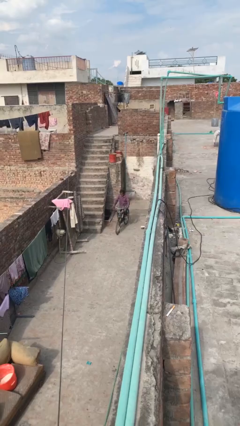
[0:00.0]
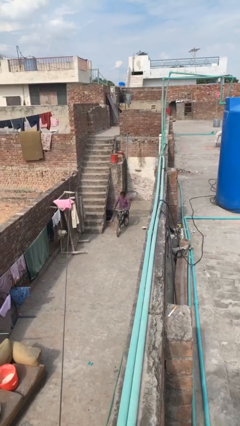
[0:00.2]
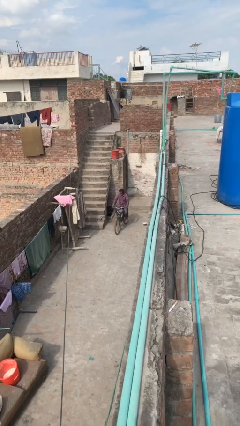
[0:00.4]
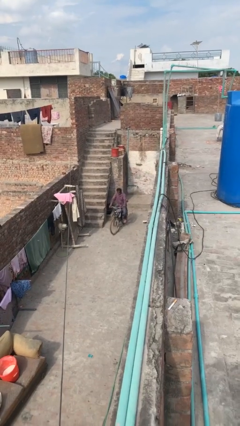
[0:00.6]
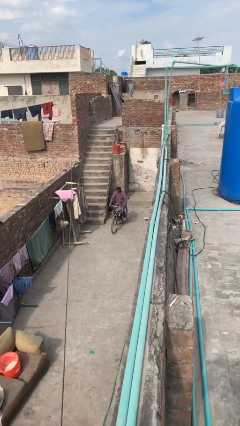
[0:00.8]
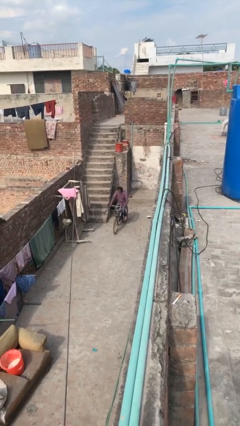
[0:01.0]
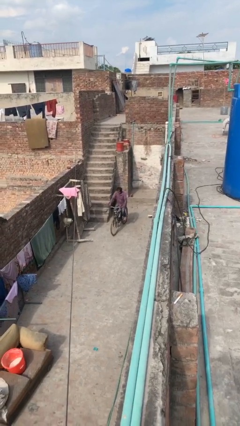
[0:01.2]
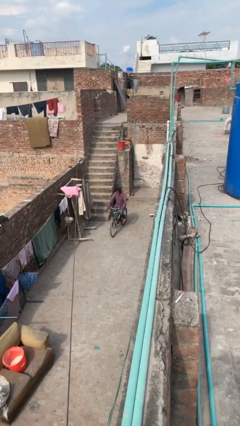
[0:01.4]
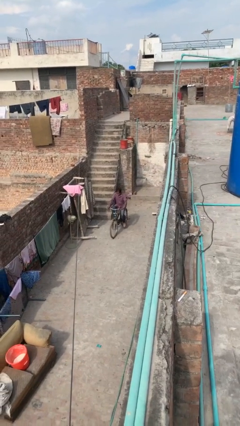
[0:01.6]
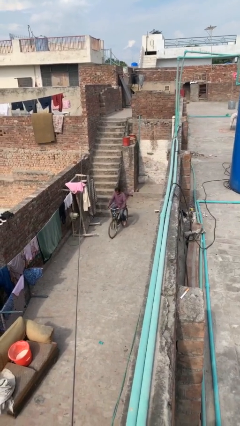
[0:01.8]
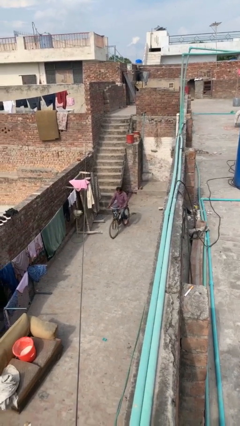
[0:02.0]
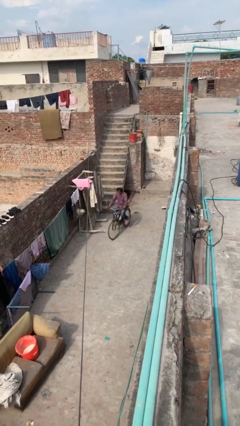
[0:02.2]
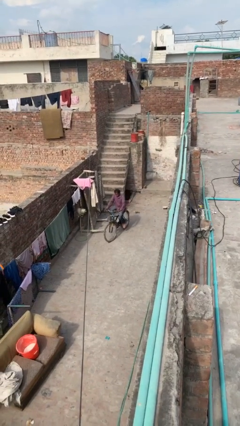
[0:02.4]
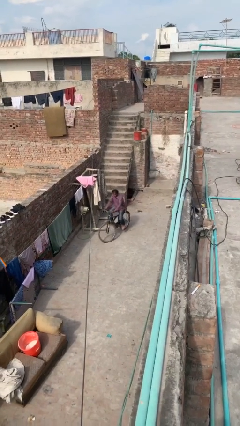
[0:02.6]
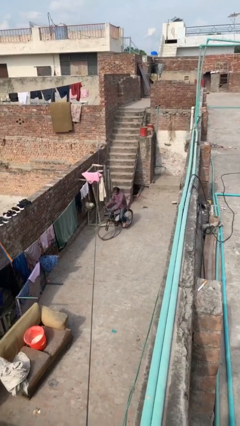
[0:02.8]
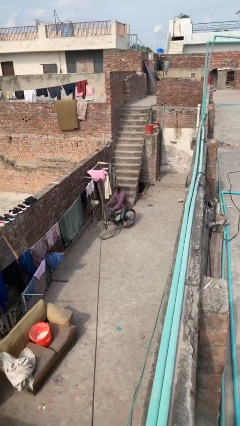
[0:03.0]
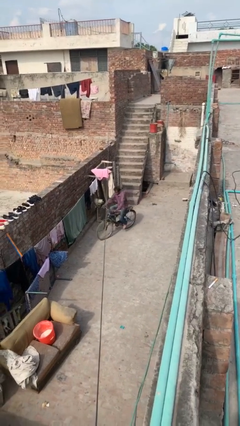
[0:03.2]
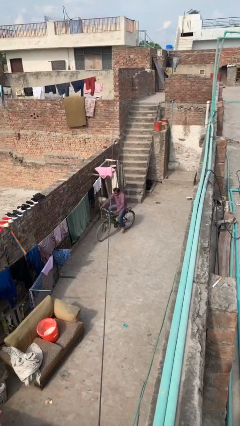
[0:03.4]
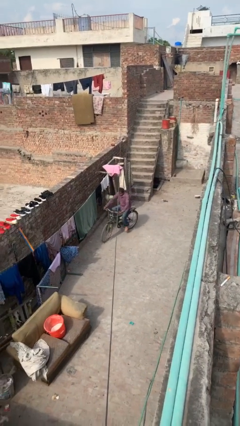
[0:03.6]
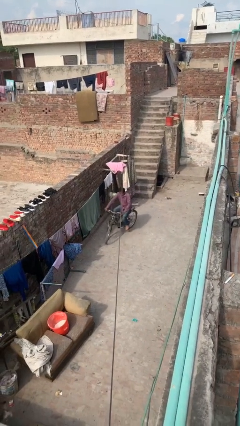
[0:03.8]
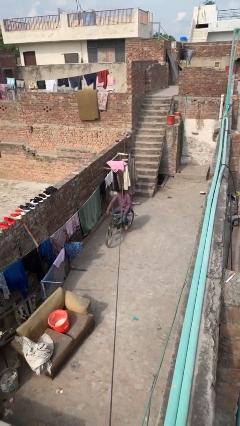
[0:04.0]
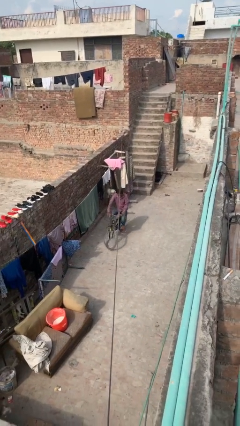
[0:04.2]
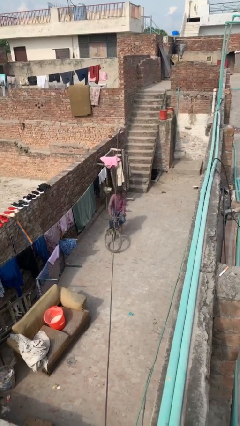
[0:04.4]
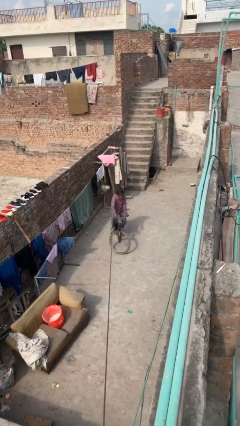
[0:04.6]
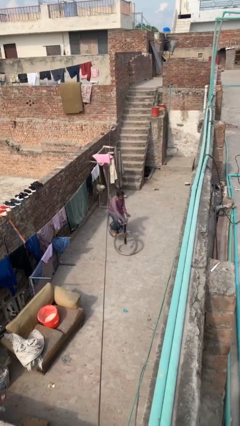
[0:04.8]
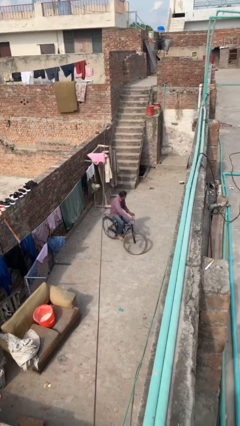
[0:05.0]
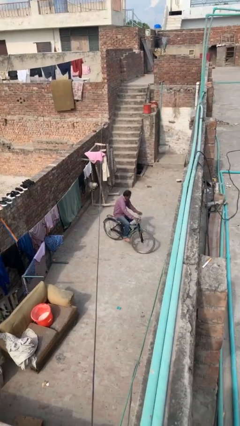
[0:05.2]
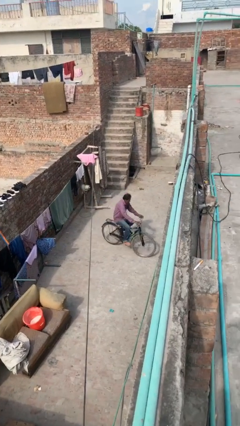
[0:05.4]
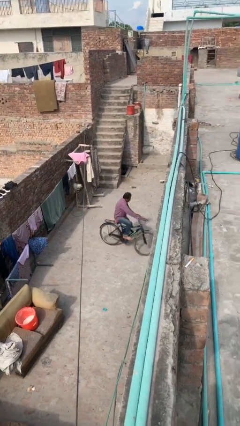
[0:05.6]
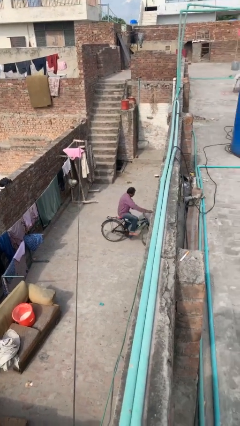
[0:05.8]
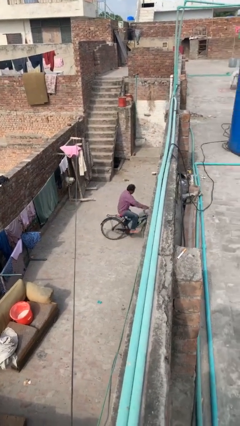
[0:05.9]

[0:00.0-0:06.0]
person rides bicycle

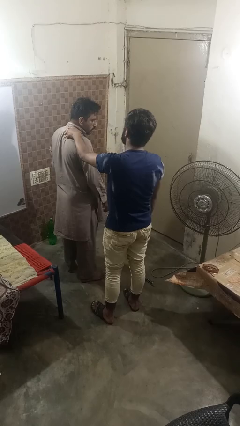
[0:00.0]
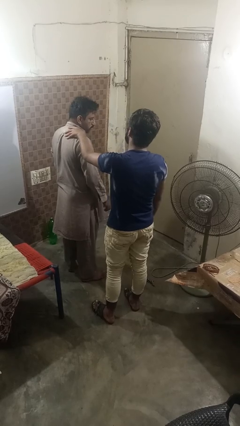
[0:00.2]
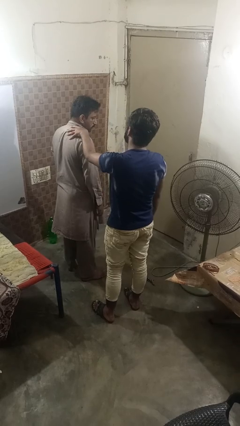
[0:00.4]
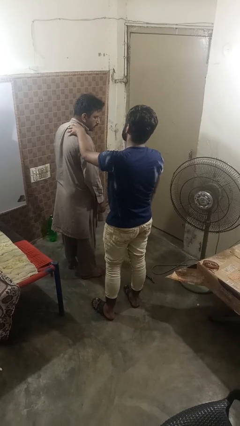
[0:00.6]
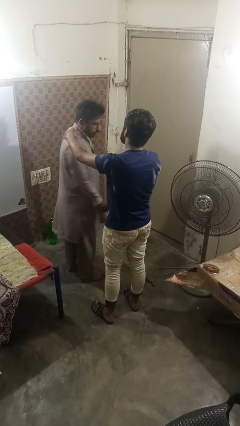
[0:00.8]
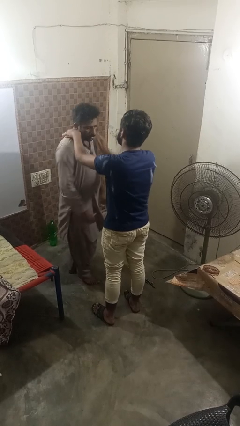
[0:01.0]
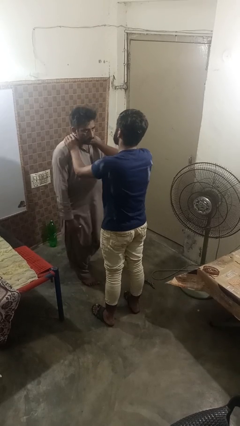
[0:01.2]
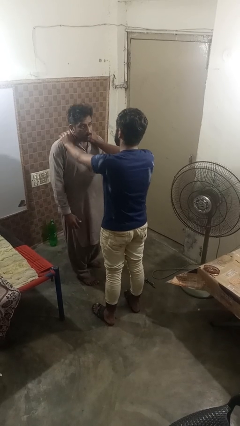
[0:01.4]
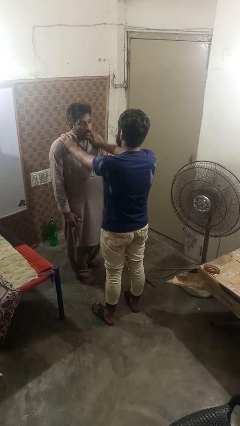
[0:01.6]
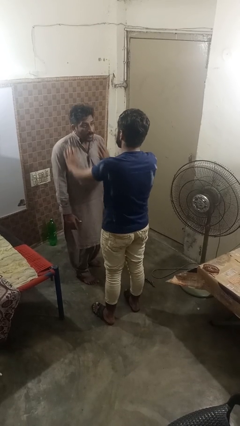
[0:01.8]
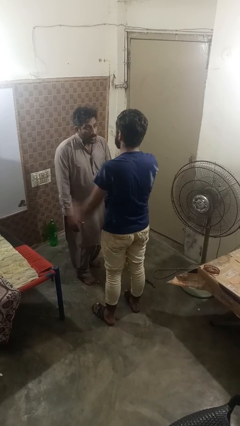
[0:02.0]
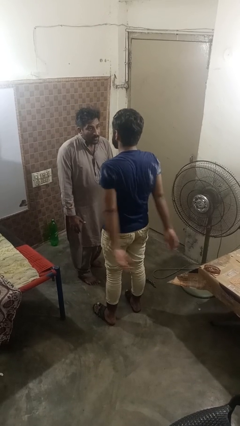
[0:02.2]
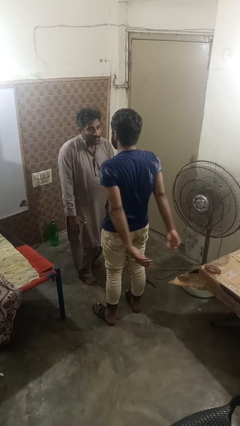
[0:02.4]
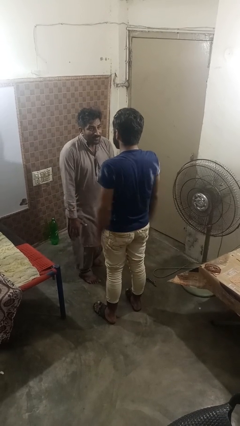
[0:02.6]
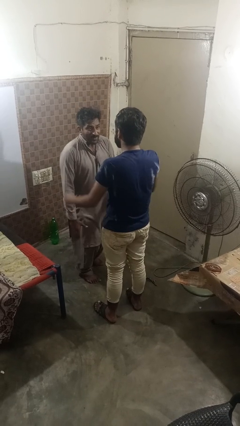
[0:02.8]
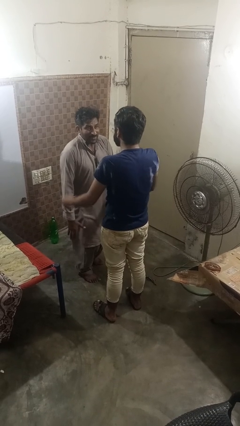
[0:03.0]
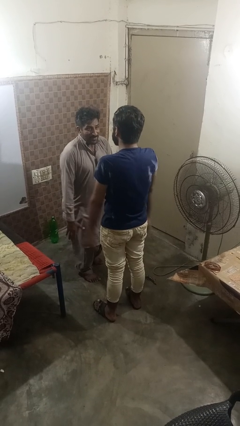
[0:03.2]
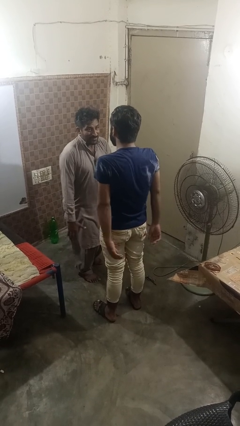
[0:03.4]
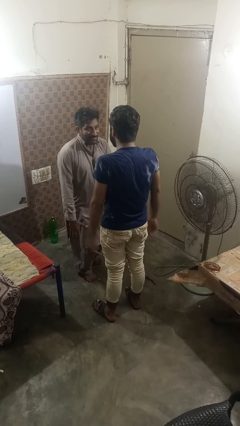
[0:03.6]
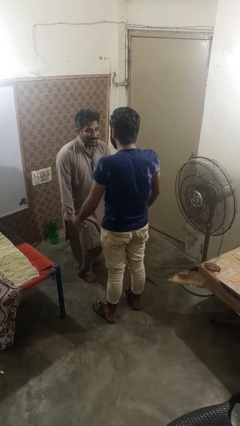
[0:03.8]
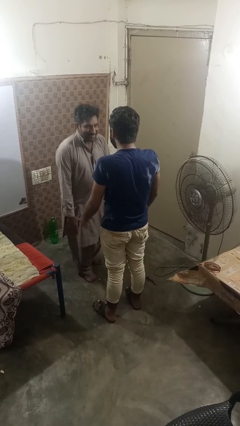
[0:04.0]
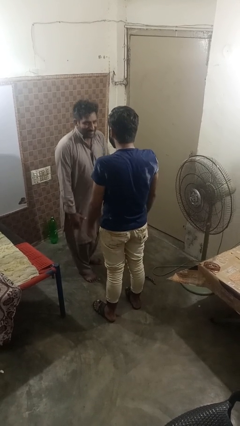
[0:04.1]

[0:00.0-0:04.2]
person spins person around

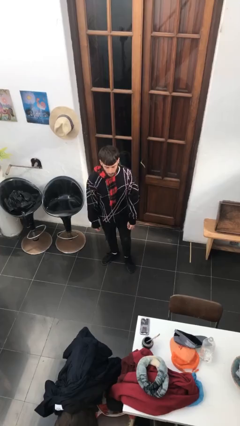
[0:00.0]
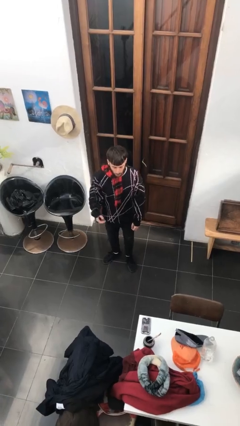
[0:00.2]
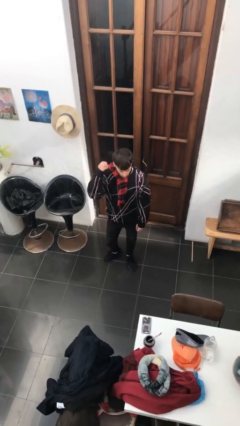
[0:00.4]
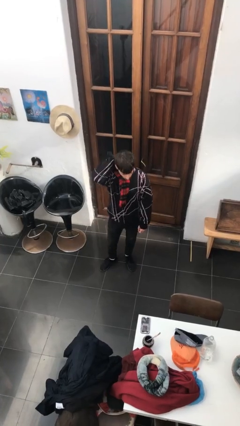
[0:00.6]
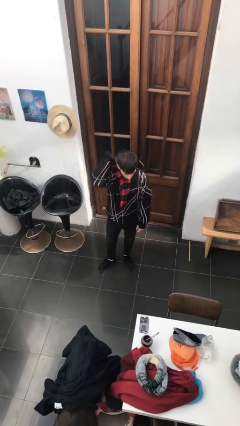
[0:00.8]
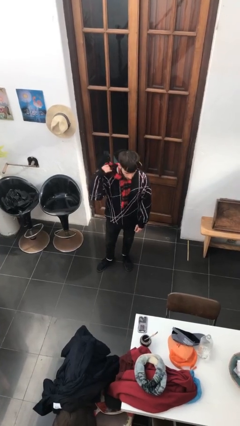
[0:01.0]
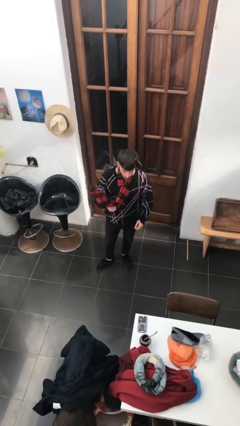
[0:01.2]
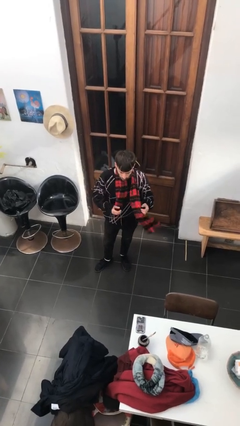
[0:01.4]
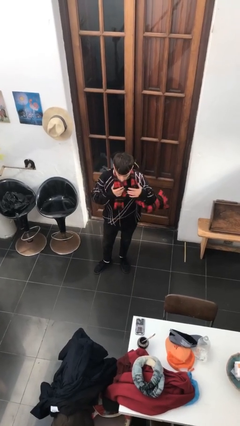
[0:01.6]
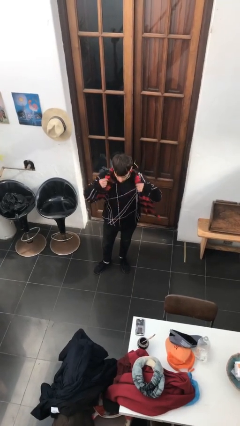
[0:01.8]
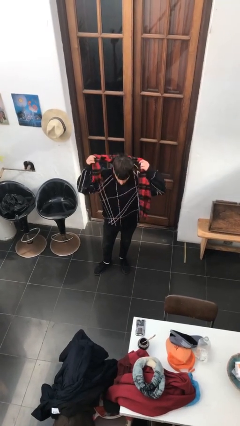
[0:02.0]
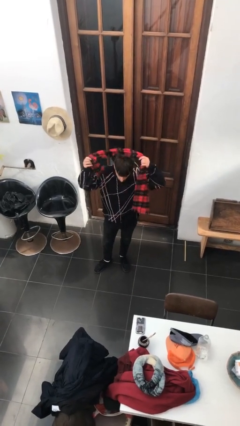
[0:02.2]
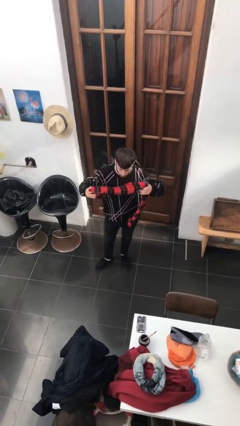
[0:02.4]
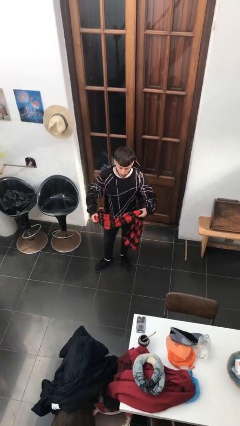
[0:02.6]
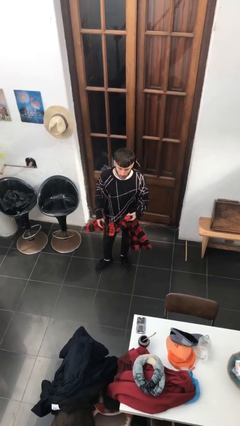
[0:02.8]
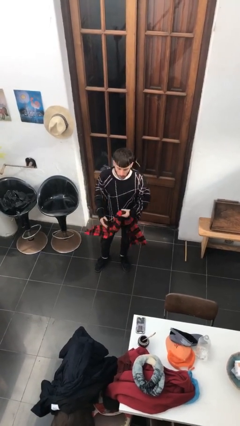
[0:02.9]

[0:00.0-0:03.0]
person takes off scarf

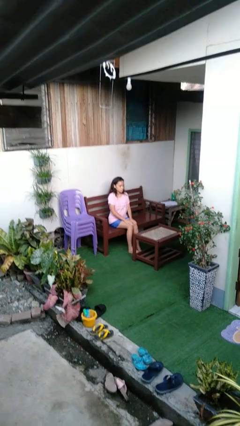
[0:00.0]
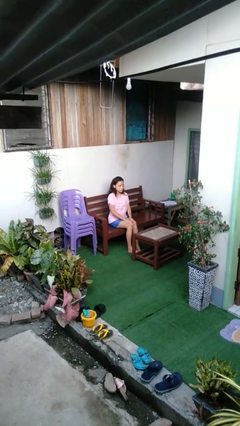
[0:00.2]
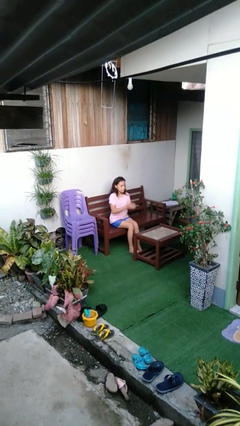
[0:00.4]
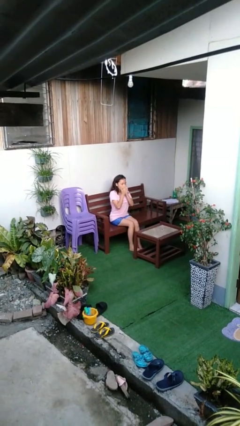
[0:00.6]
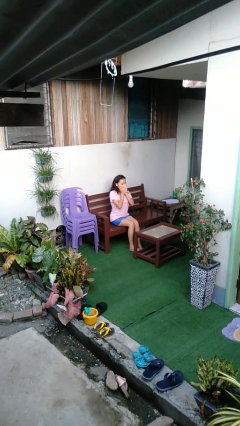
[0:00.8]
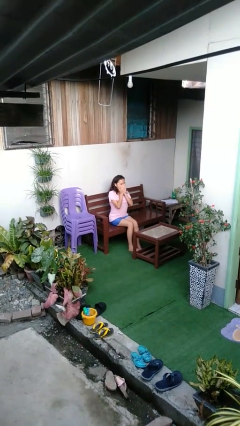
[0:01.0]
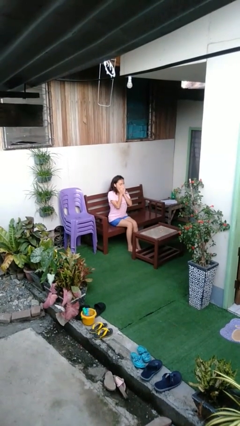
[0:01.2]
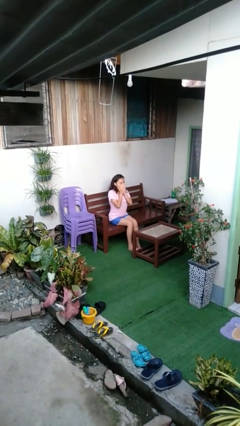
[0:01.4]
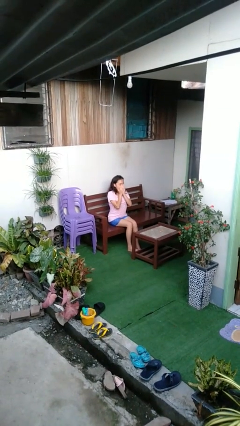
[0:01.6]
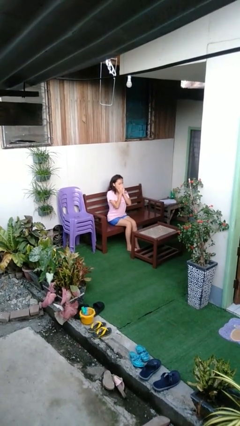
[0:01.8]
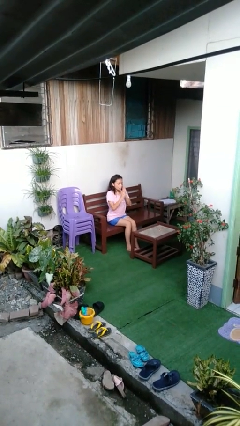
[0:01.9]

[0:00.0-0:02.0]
person yawns

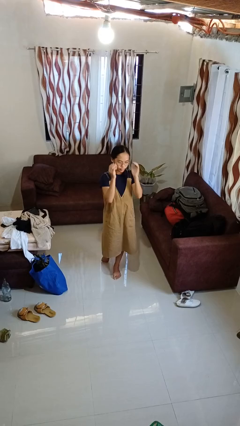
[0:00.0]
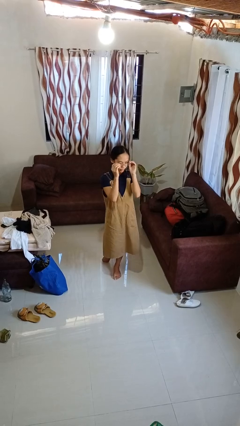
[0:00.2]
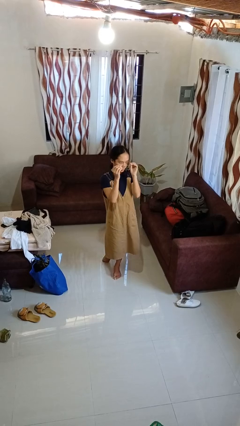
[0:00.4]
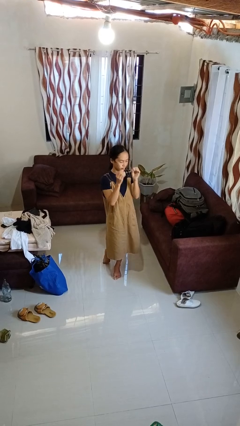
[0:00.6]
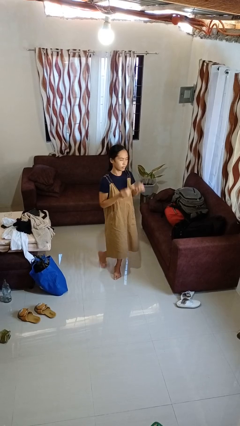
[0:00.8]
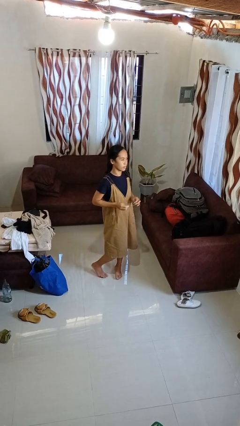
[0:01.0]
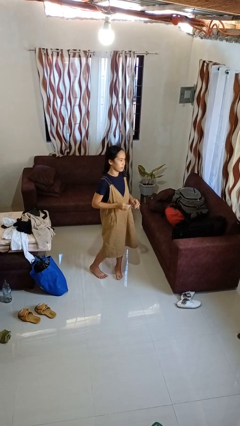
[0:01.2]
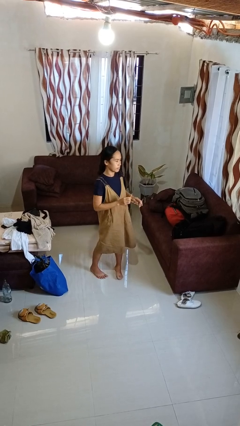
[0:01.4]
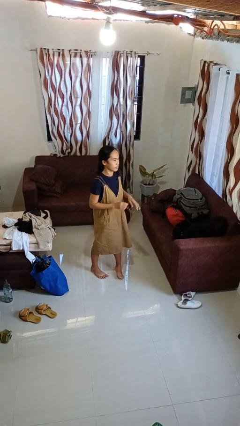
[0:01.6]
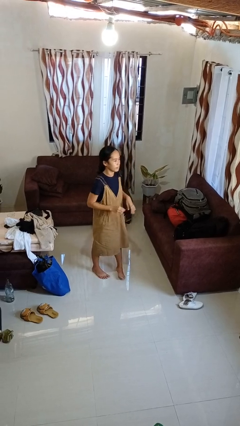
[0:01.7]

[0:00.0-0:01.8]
person takes off glasses
